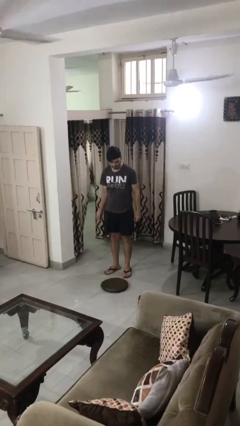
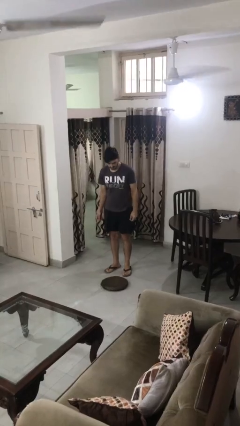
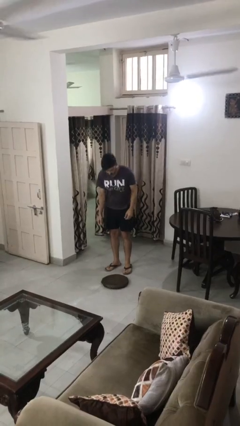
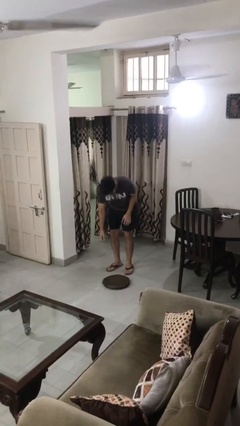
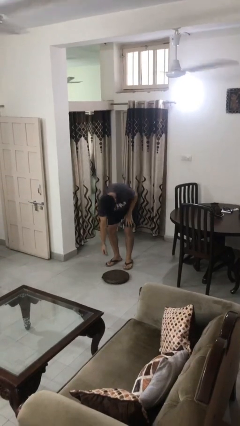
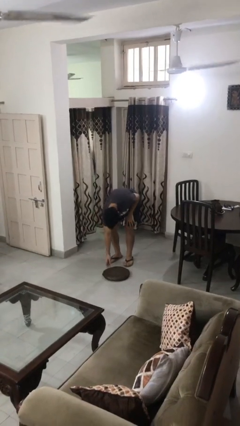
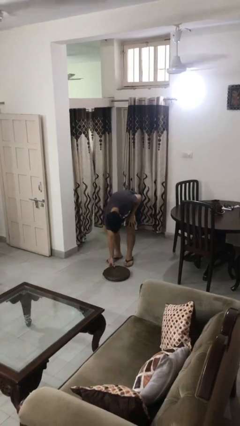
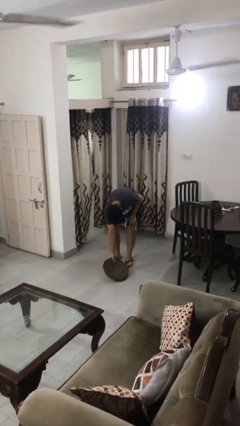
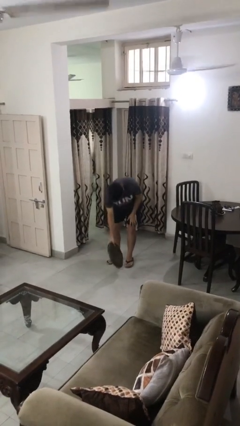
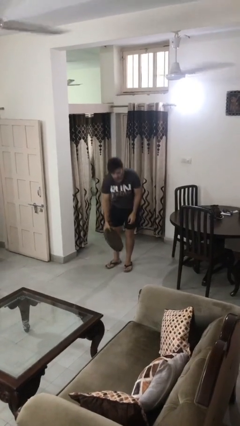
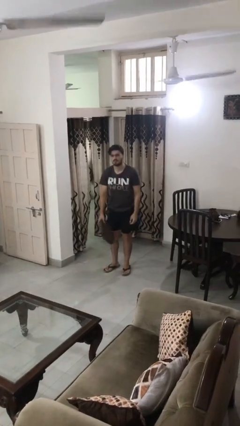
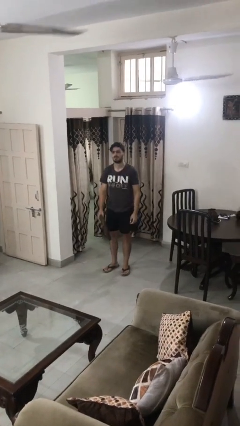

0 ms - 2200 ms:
person picks up object from floor

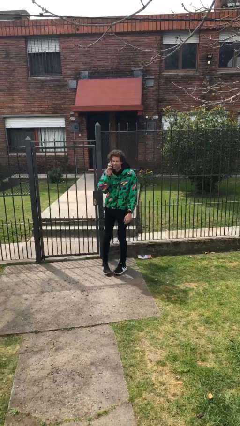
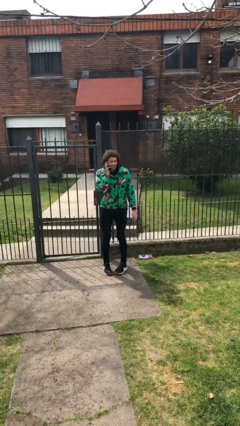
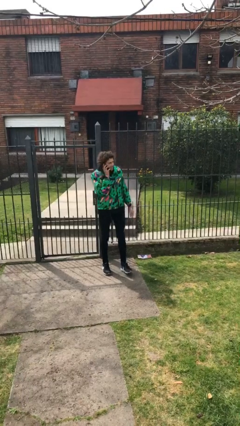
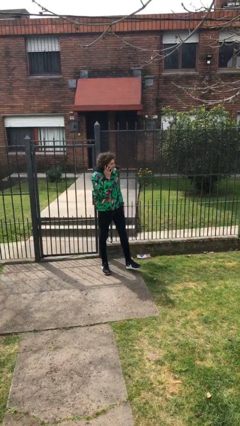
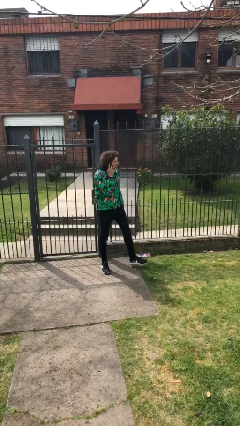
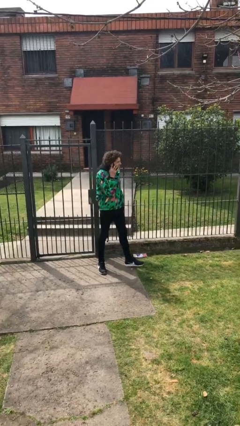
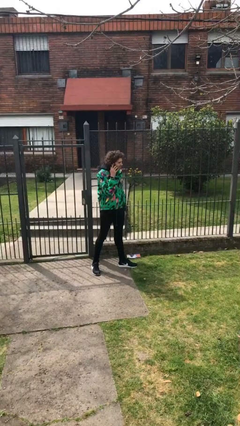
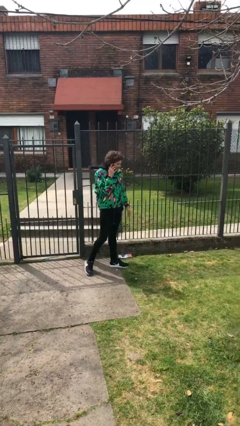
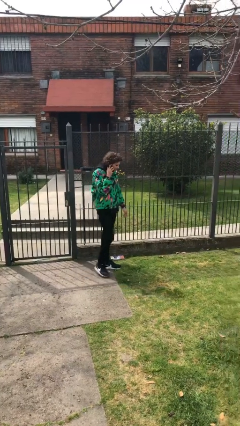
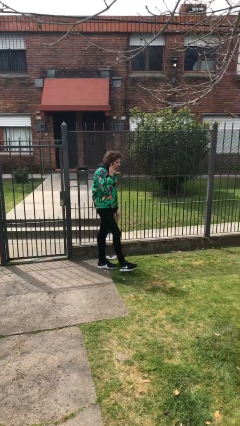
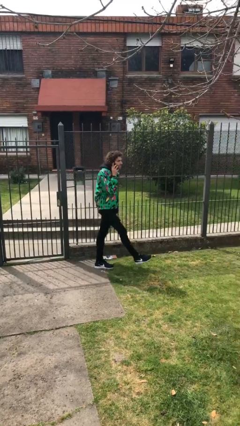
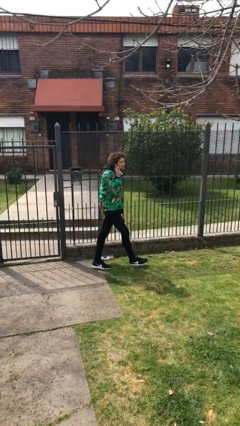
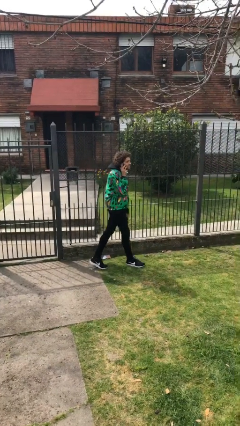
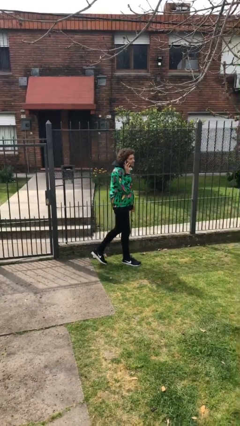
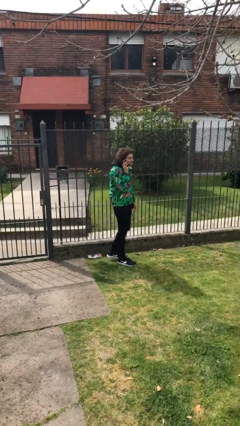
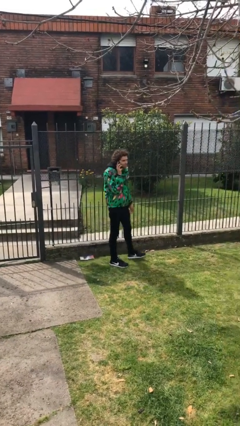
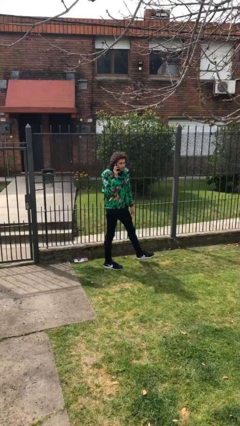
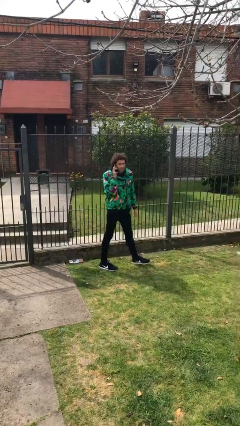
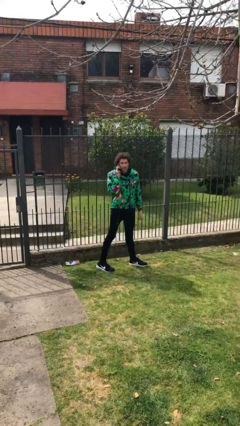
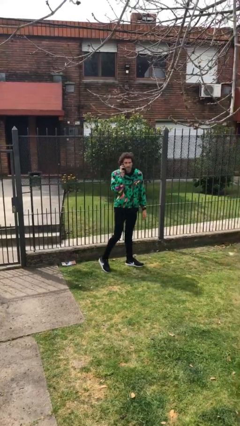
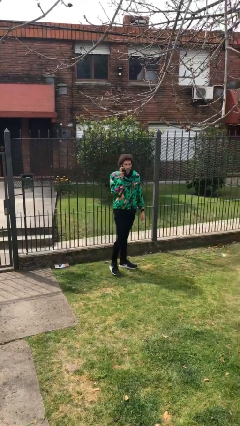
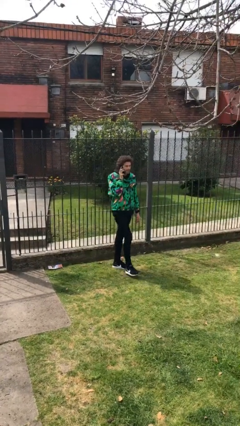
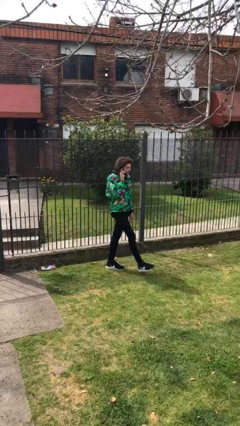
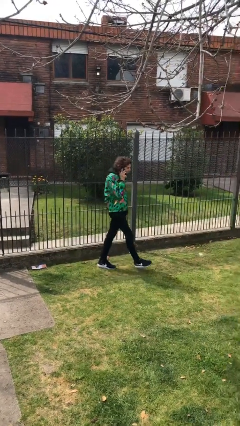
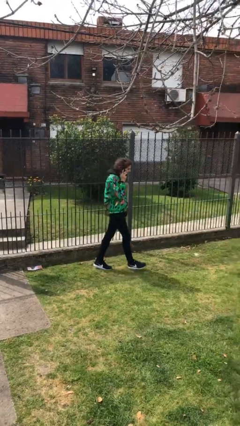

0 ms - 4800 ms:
person talks on phone

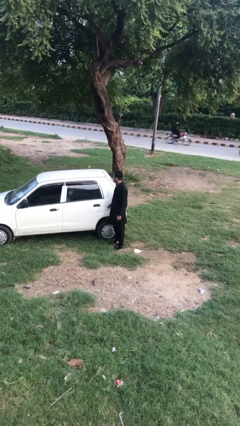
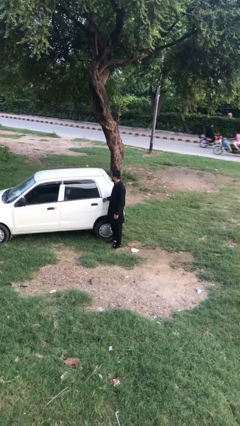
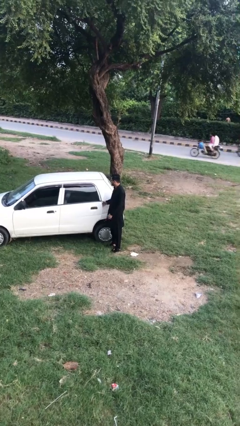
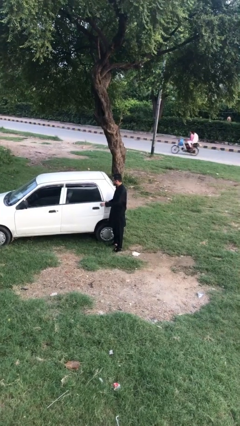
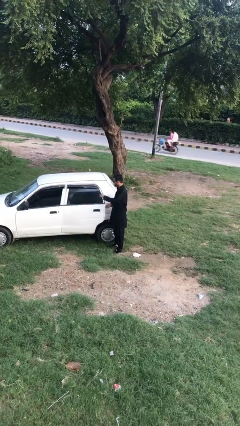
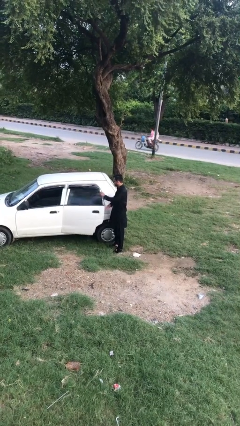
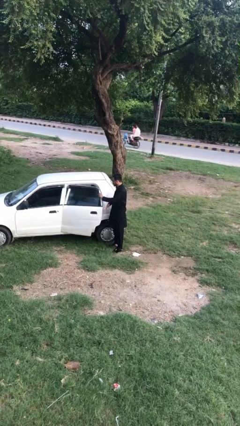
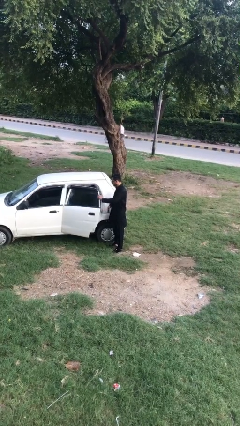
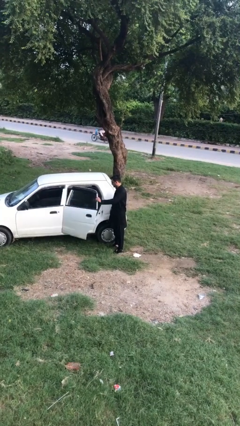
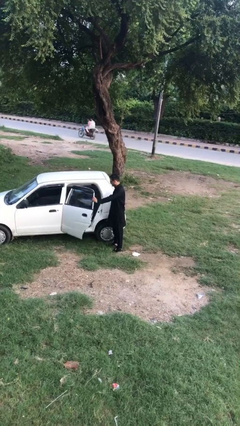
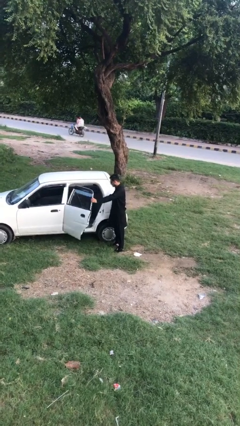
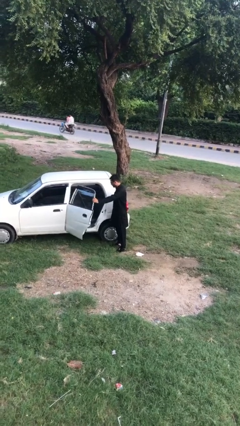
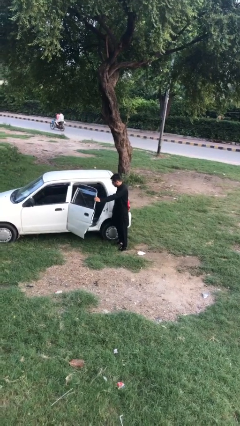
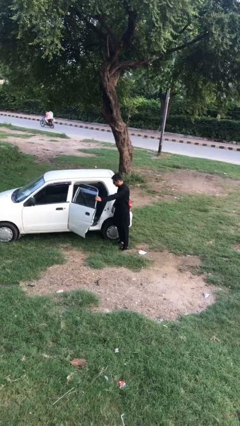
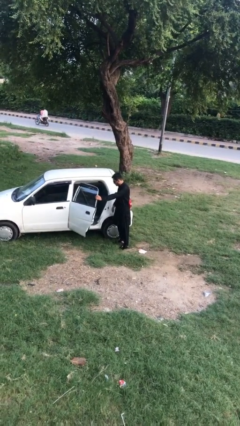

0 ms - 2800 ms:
person opens car door

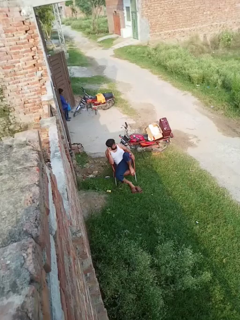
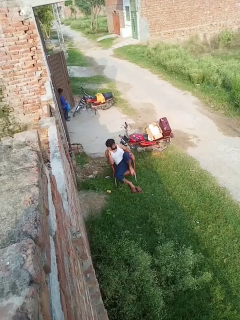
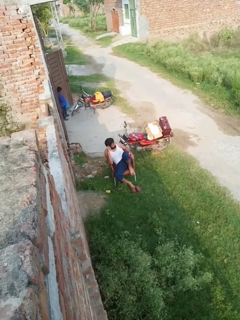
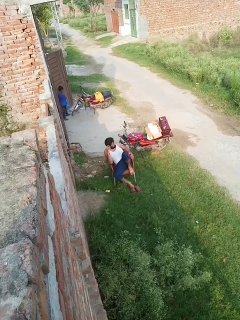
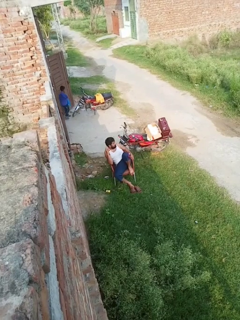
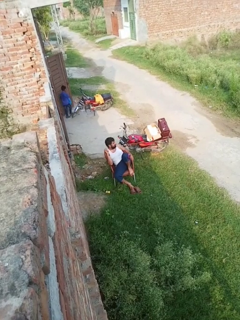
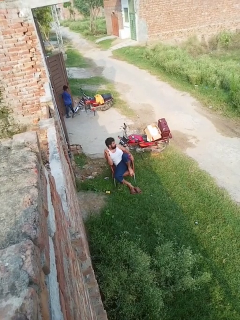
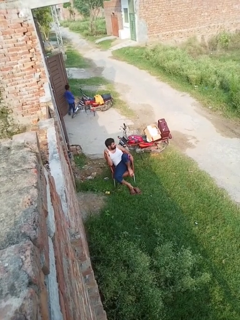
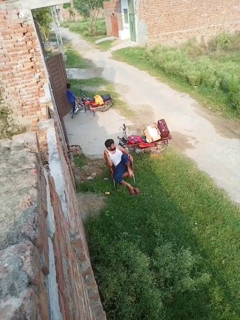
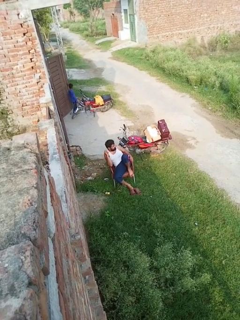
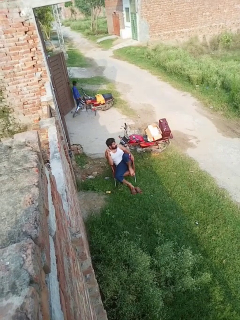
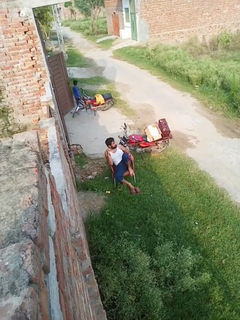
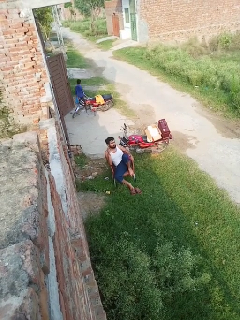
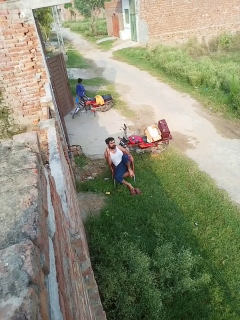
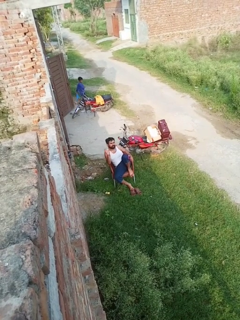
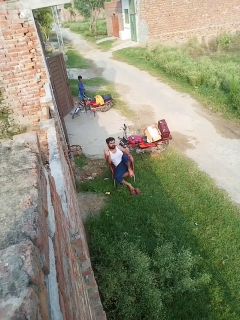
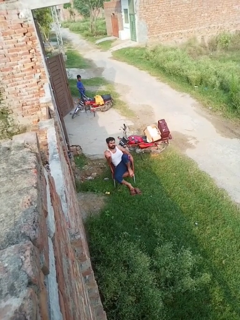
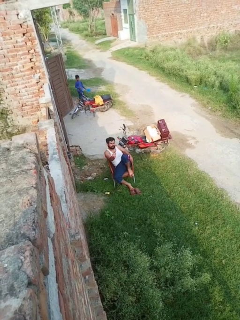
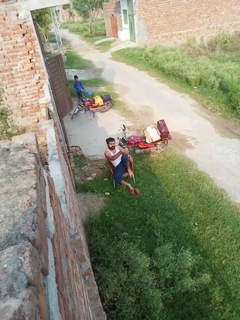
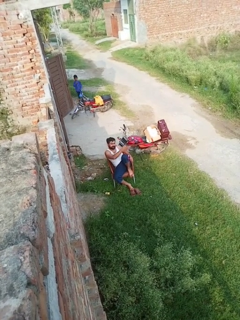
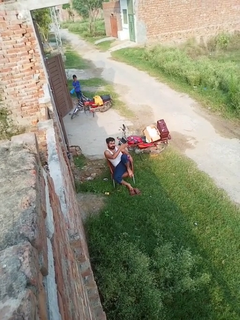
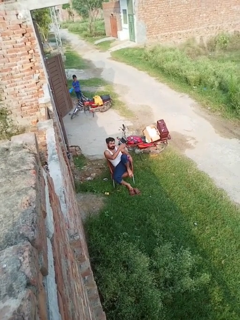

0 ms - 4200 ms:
person gestures swipe left

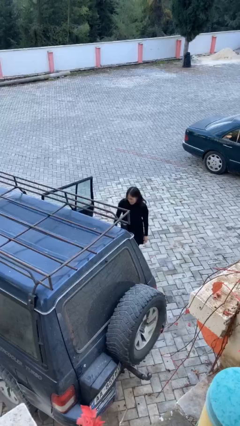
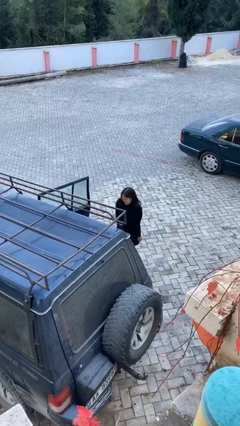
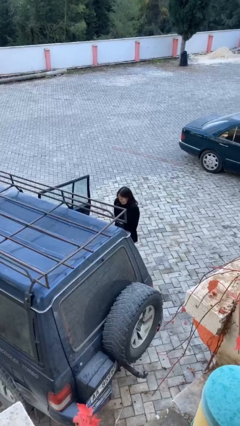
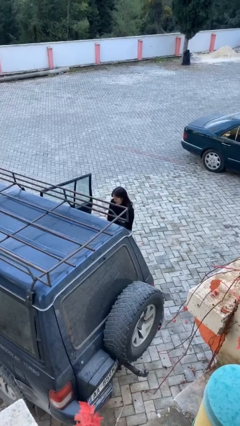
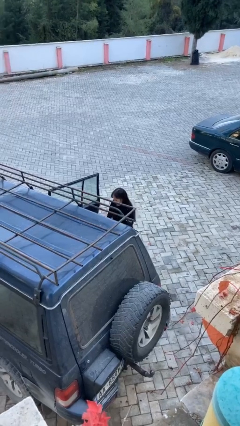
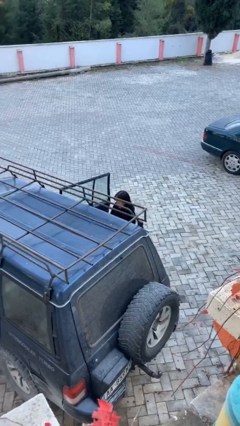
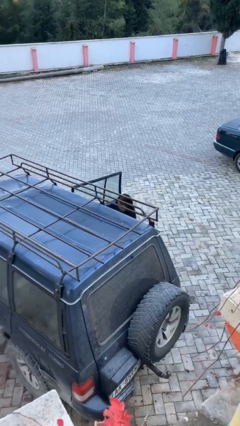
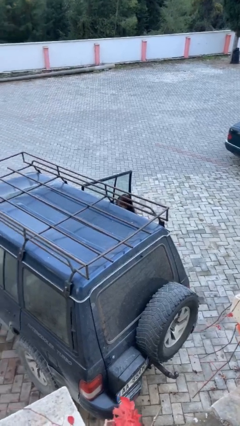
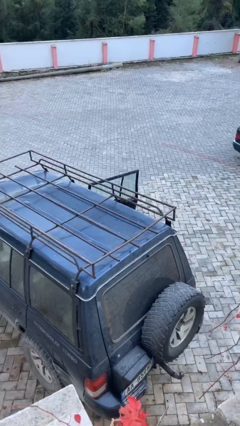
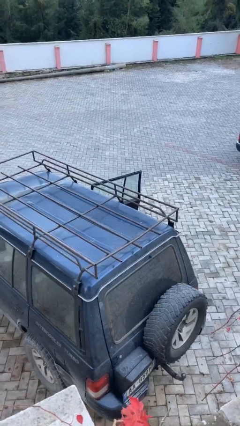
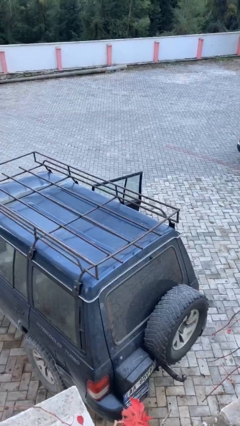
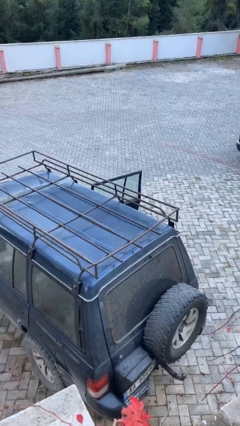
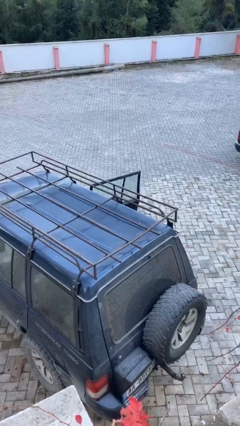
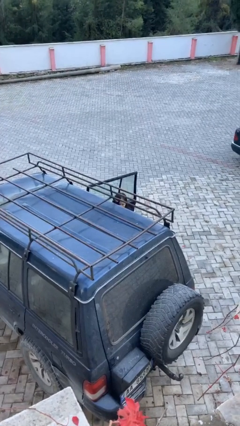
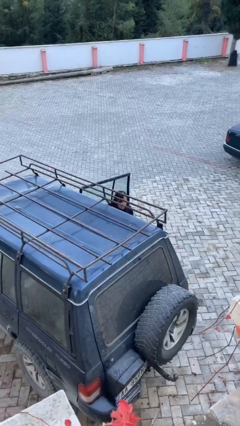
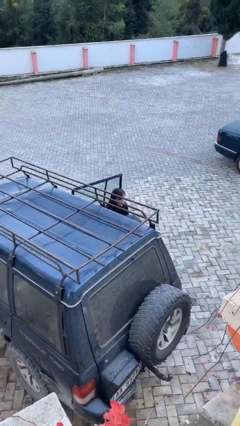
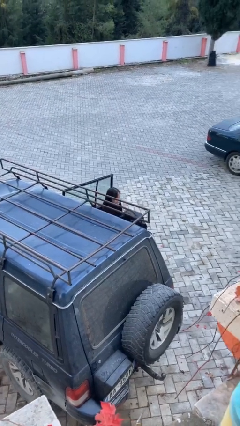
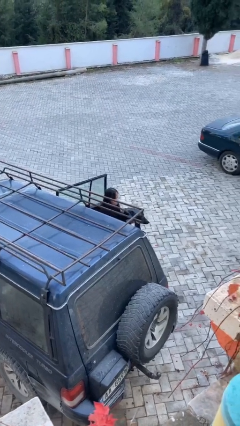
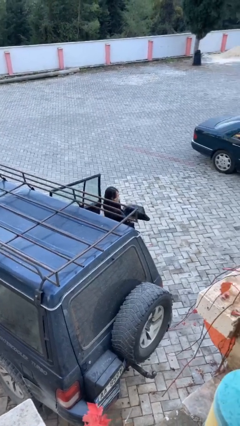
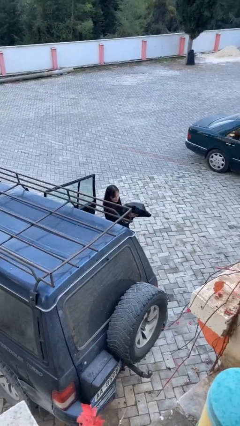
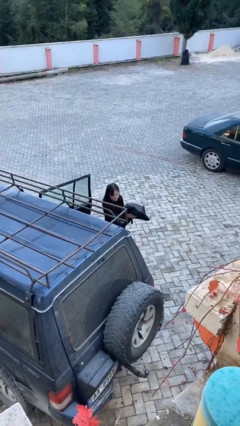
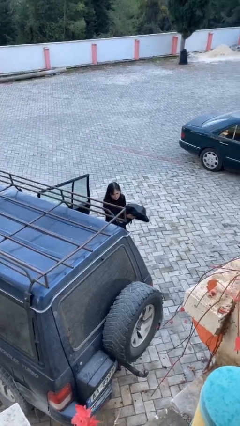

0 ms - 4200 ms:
person unloads car
